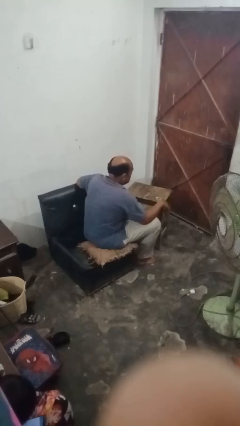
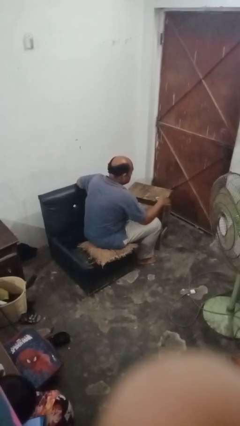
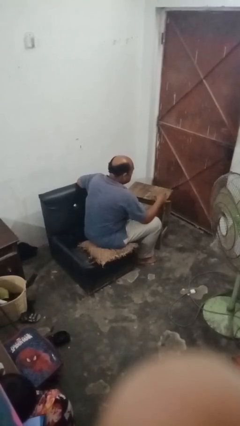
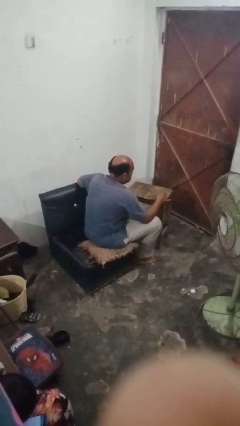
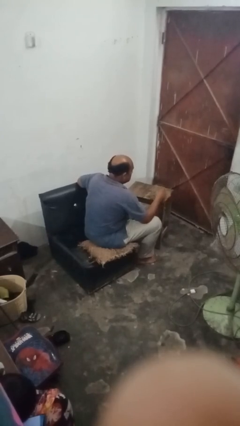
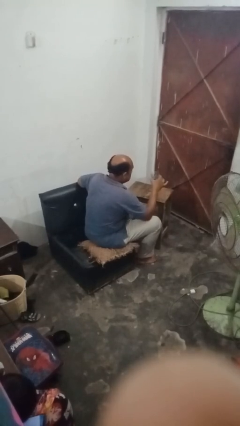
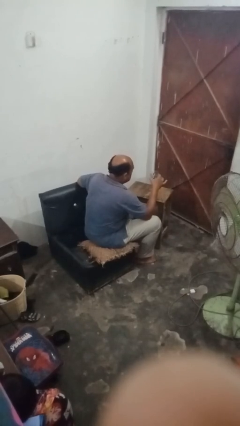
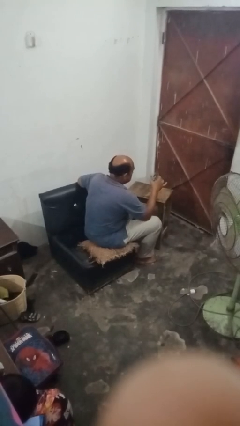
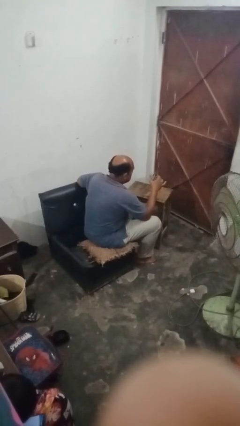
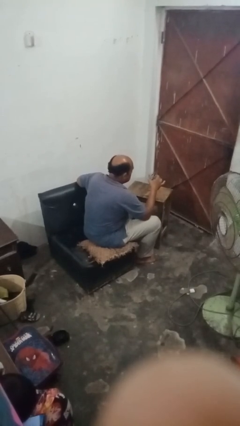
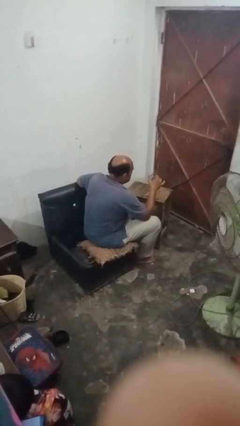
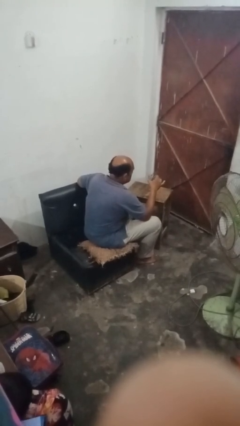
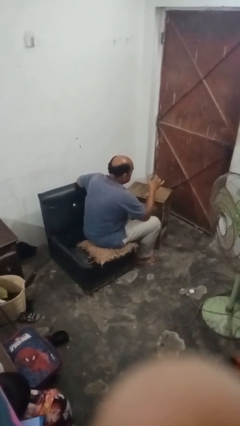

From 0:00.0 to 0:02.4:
person picks up object from table

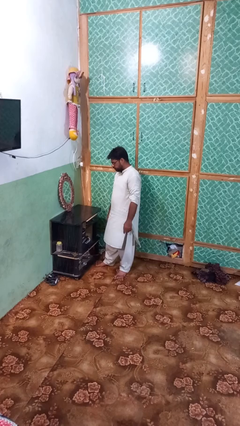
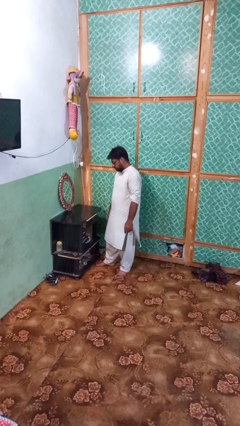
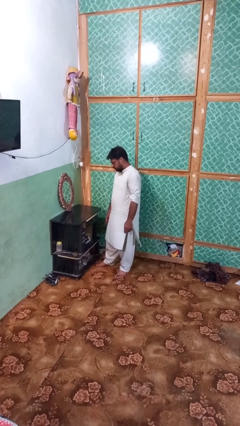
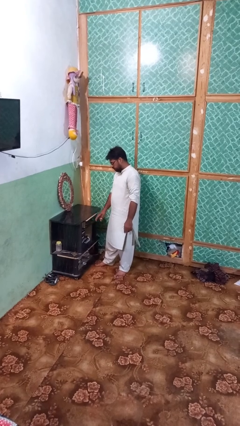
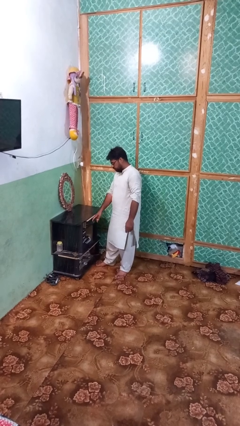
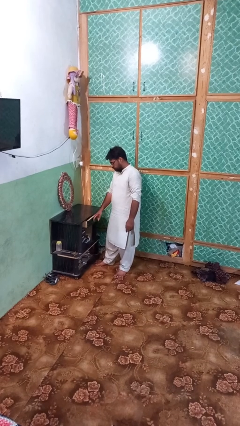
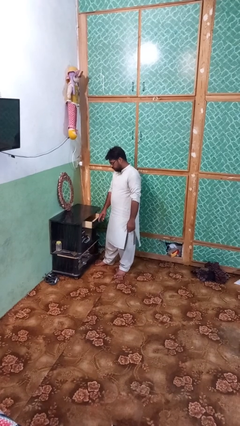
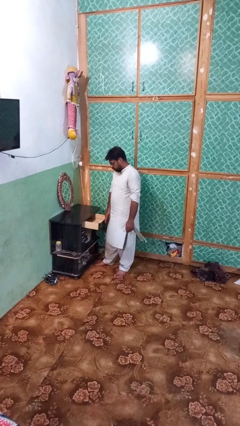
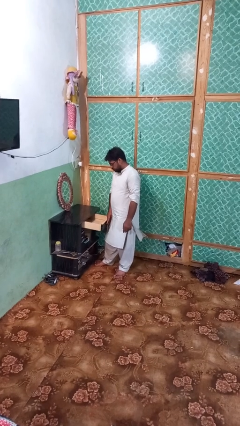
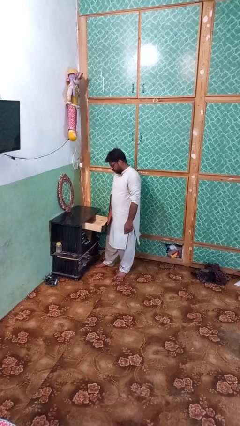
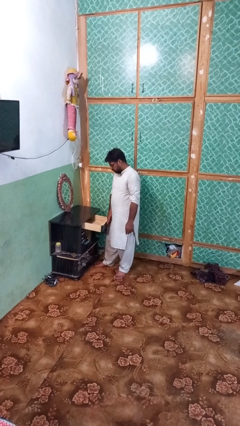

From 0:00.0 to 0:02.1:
person opens dresser drawer

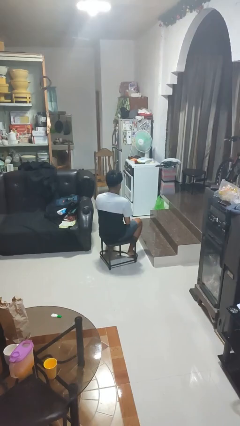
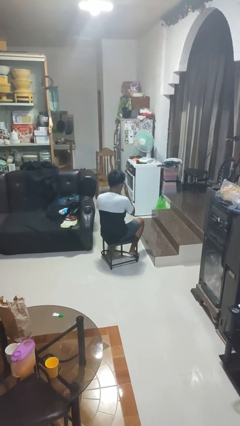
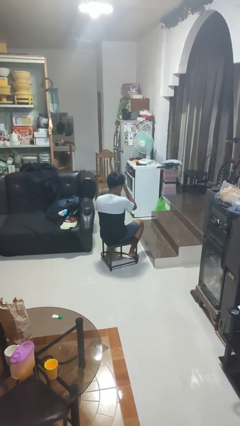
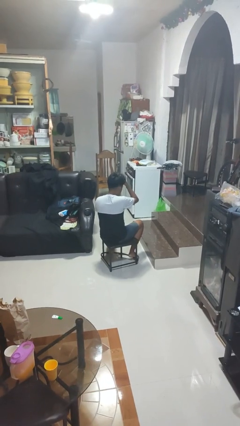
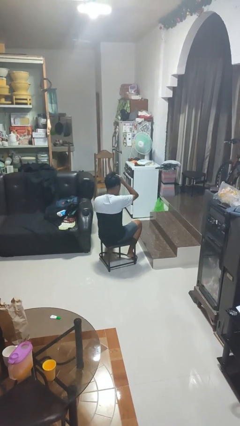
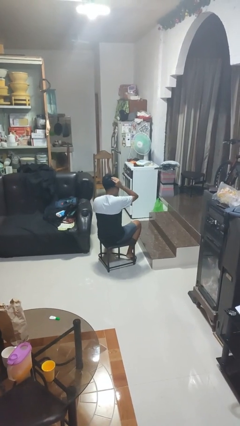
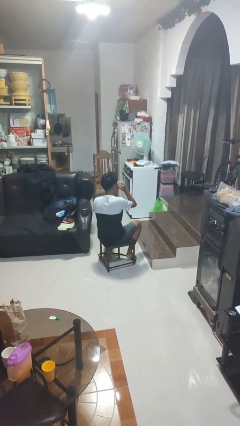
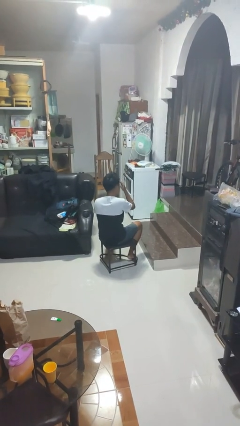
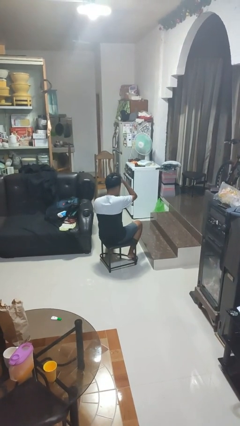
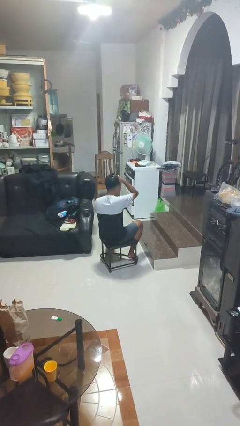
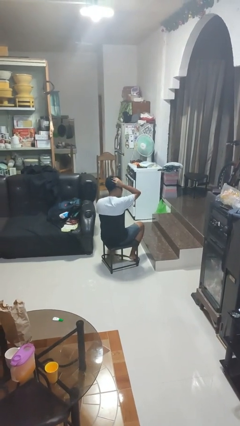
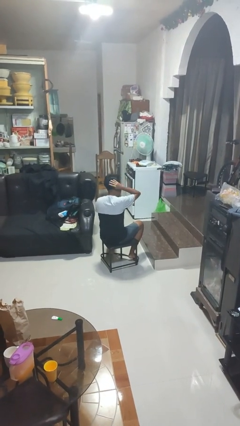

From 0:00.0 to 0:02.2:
person strokes hair

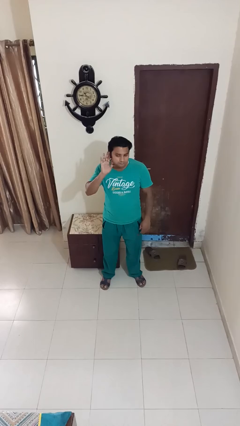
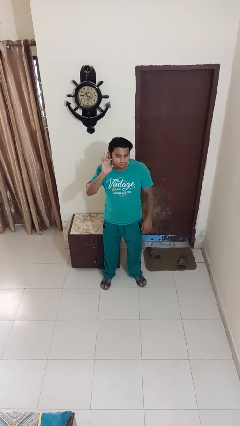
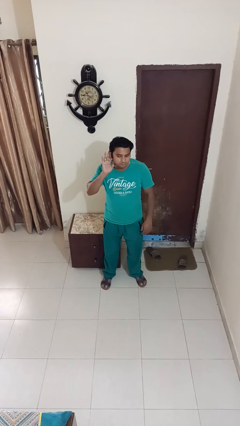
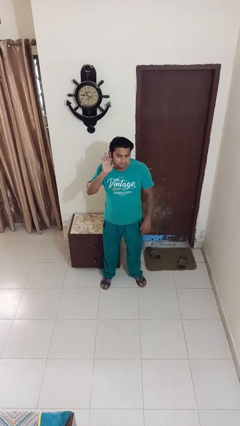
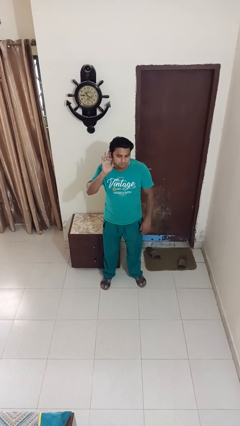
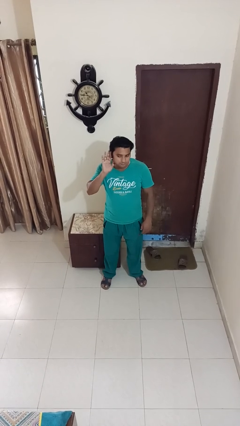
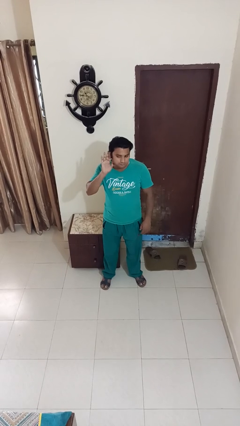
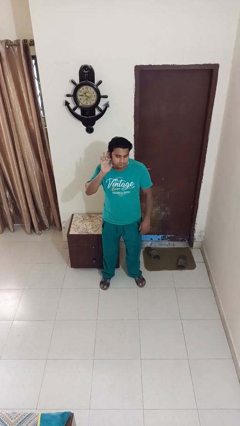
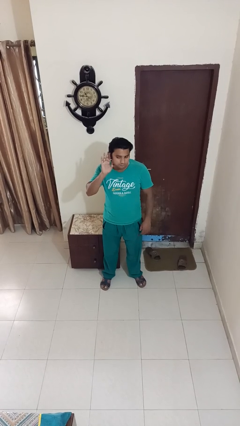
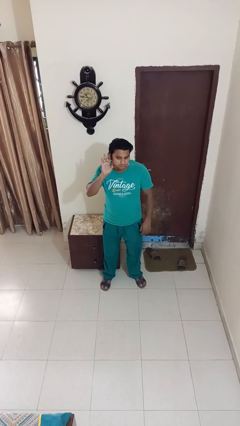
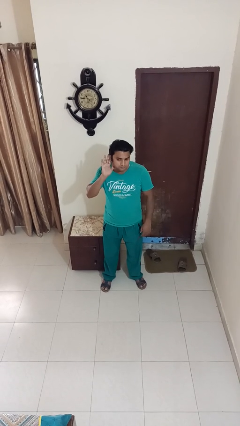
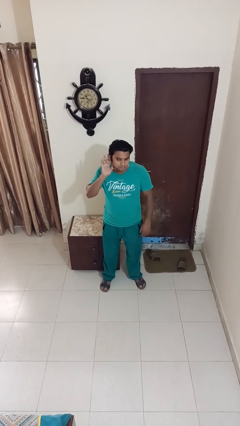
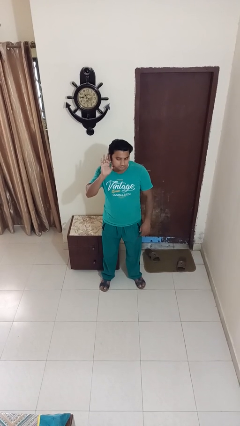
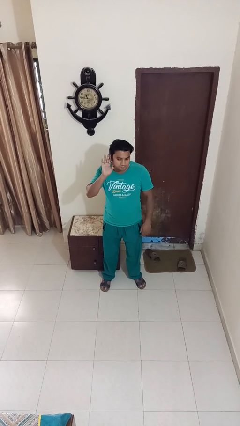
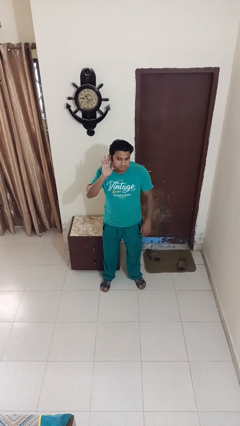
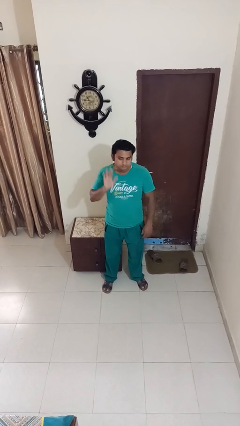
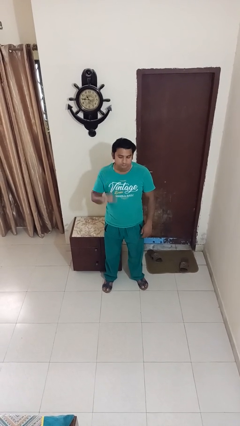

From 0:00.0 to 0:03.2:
person gestures listen closely

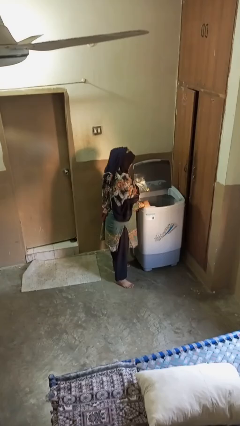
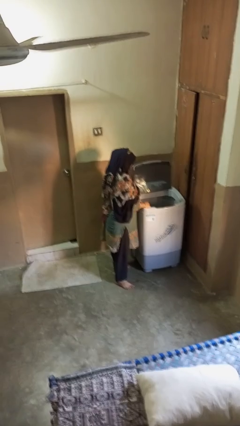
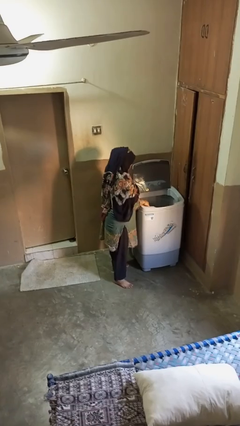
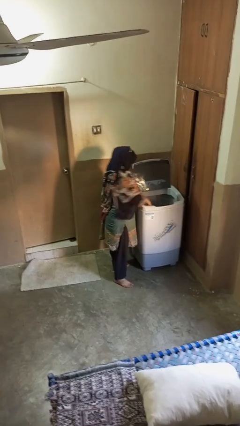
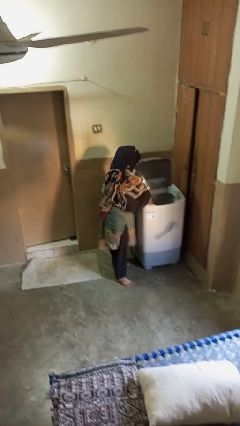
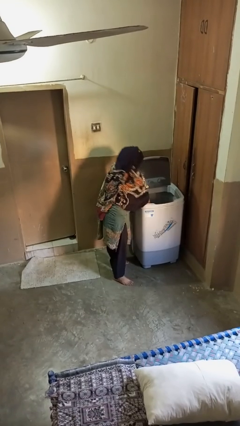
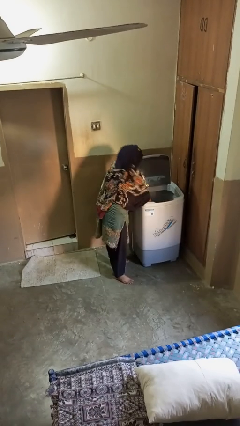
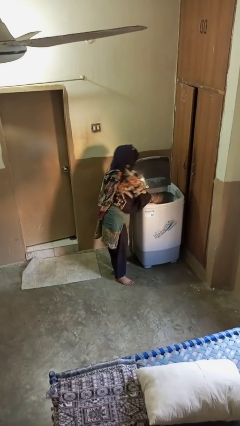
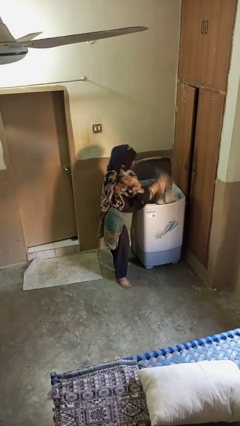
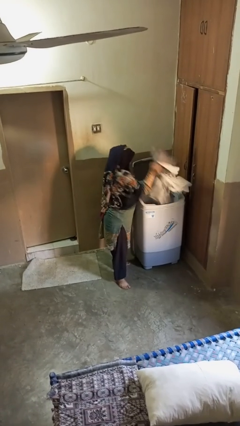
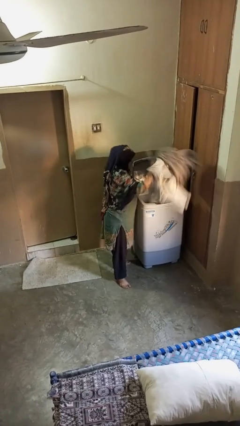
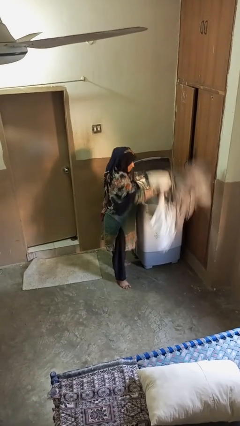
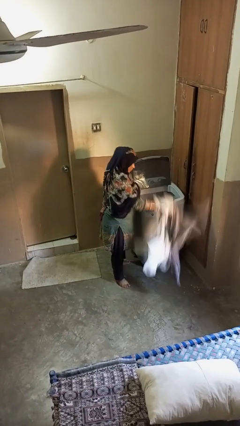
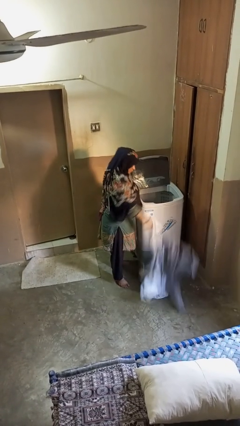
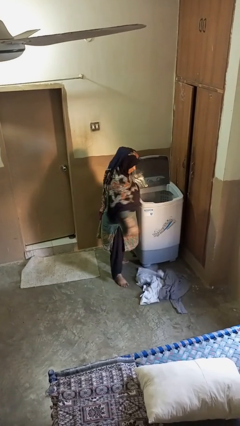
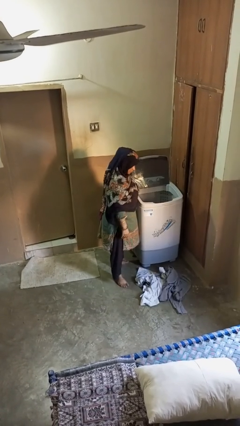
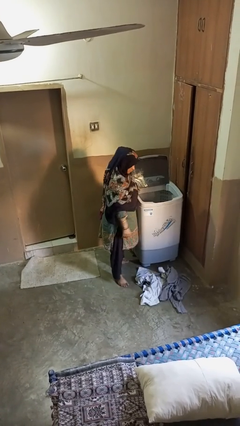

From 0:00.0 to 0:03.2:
person unloads clotheswasher

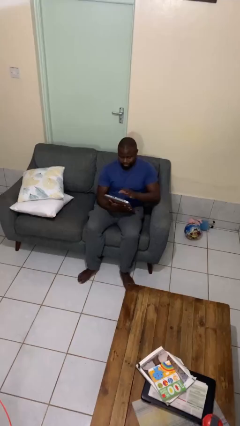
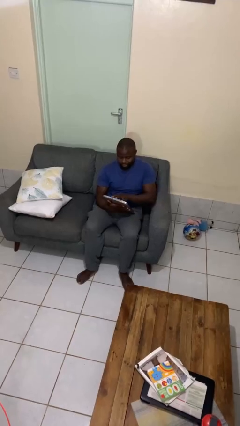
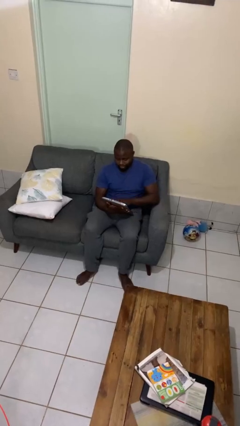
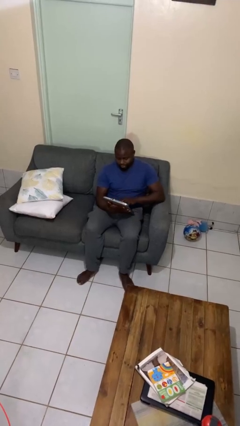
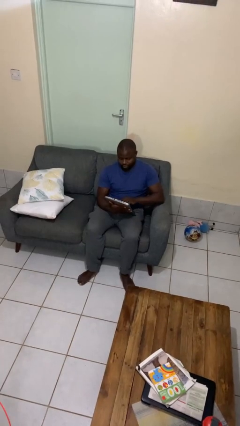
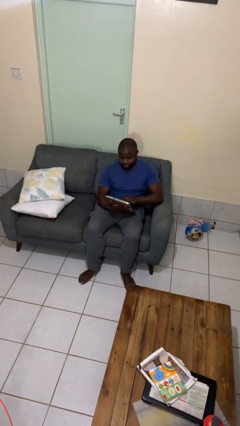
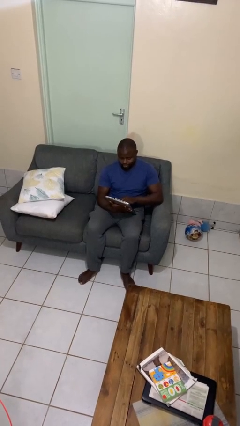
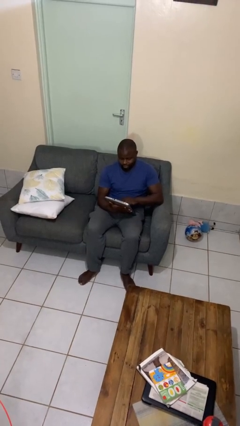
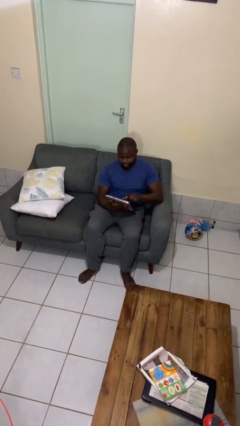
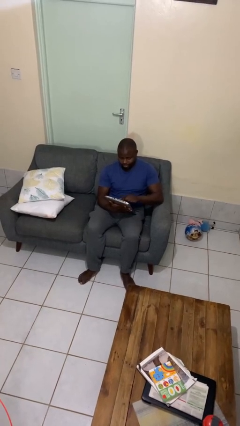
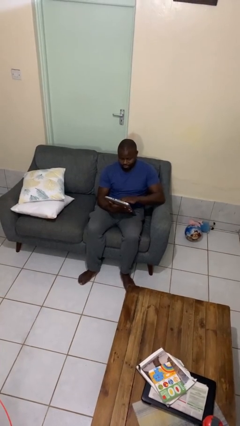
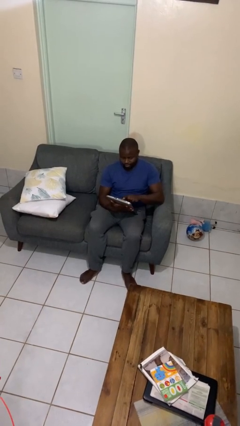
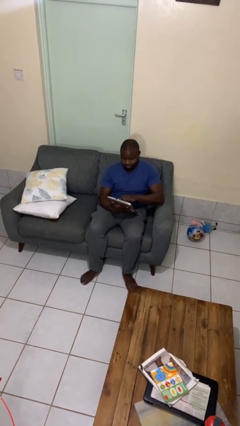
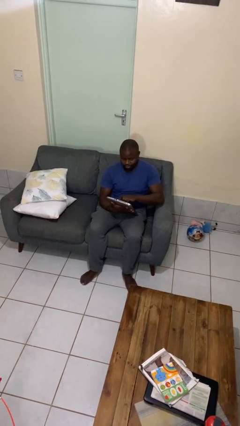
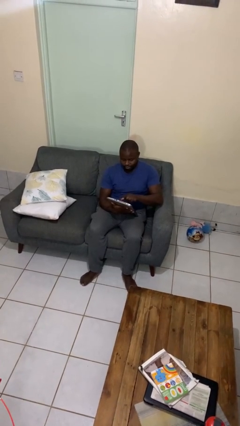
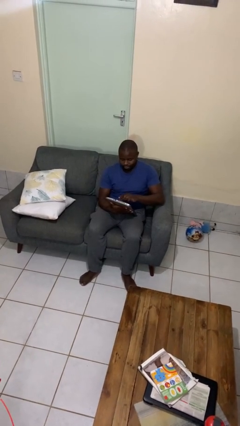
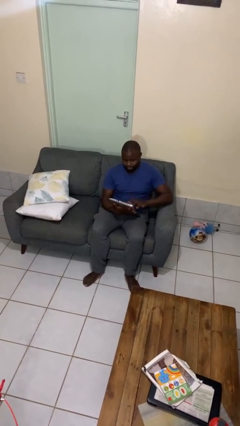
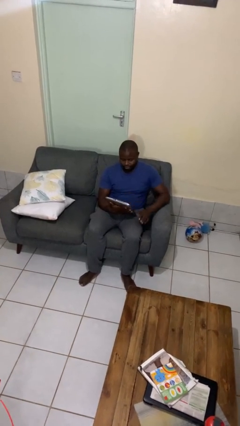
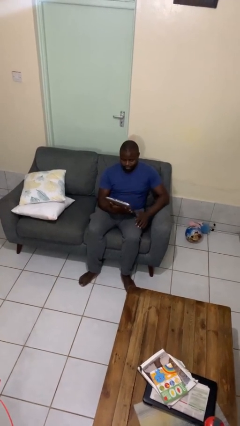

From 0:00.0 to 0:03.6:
person interacts with tablet

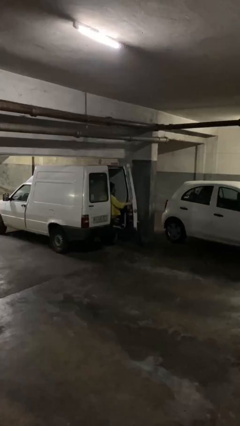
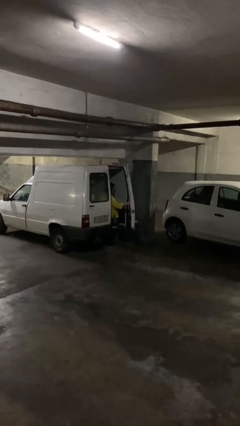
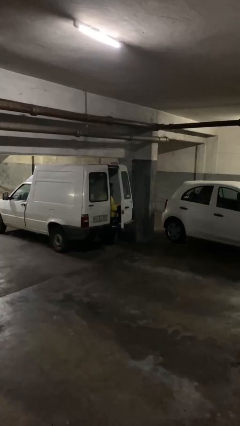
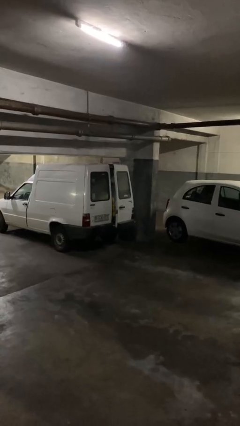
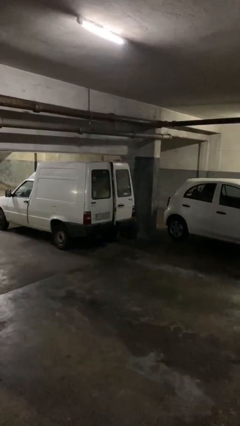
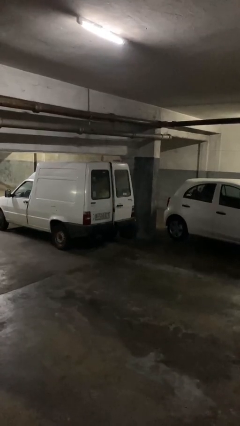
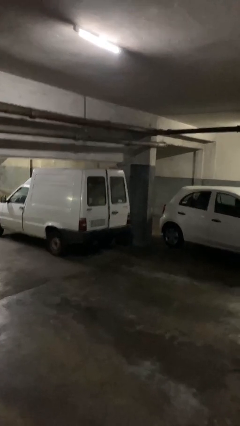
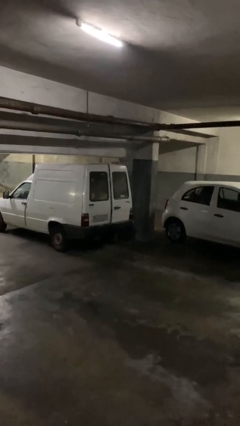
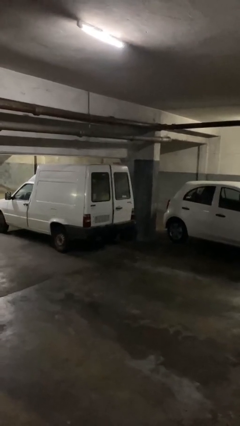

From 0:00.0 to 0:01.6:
person closes car door
